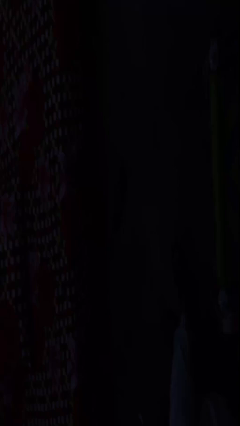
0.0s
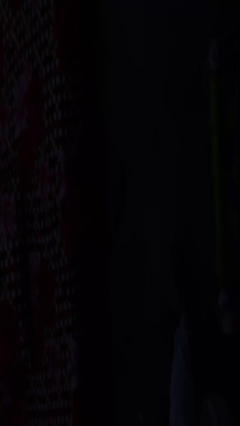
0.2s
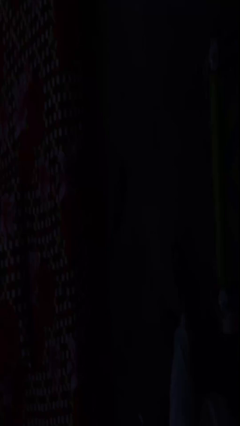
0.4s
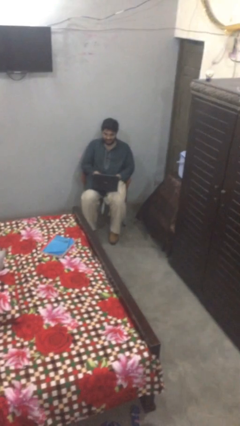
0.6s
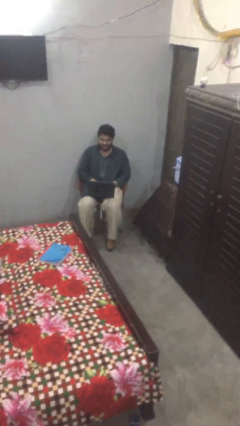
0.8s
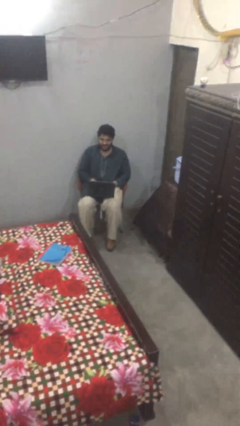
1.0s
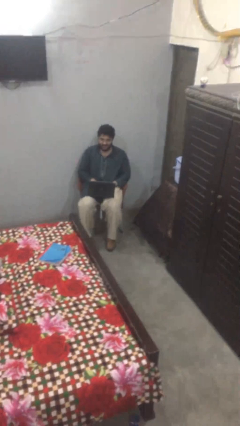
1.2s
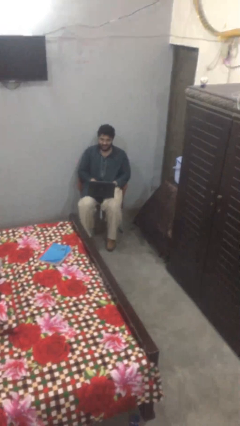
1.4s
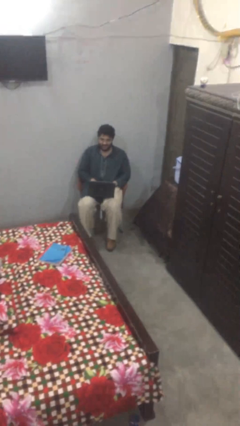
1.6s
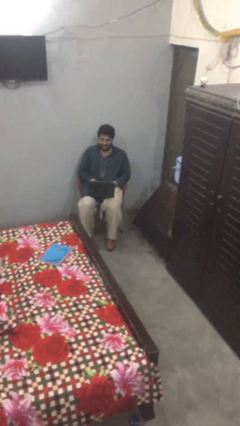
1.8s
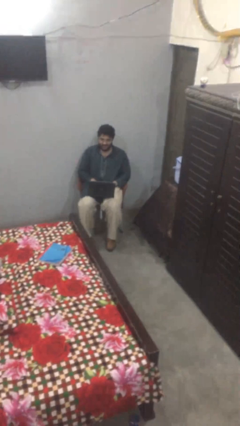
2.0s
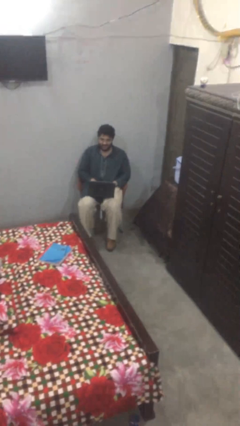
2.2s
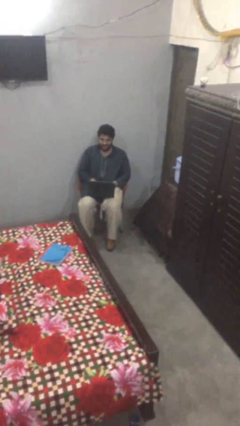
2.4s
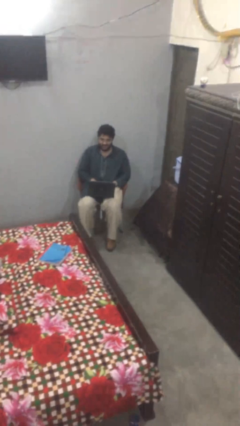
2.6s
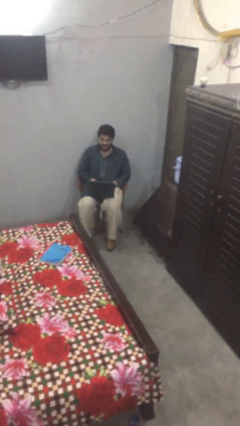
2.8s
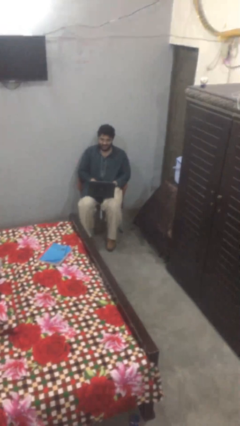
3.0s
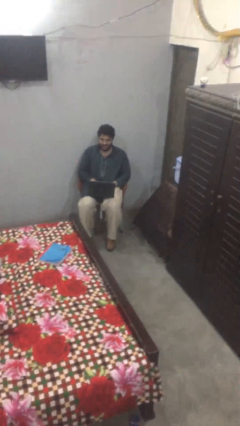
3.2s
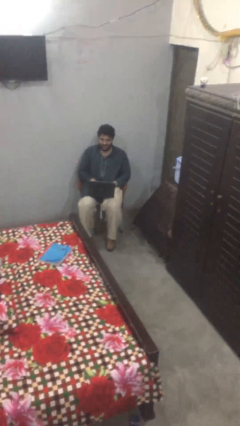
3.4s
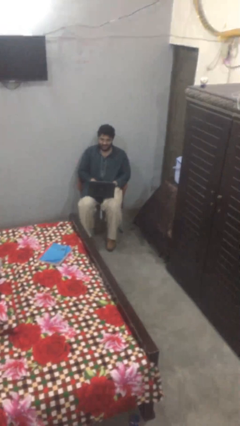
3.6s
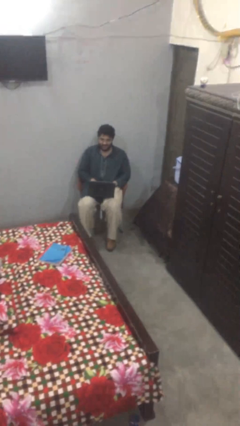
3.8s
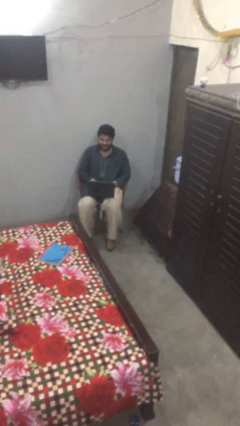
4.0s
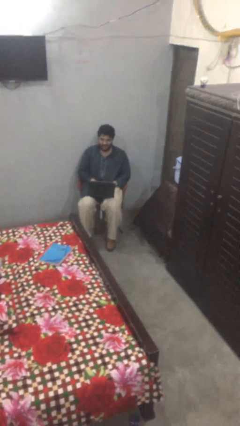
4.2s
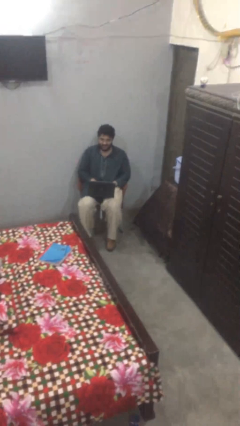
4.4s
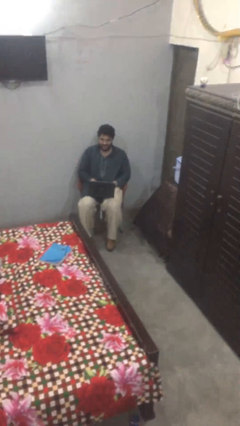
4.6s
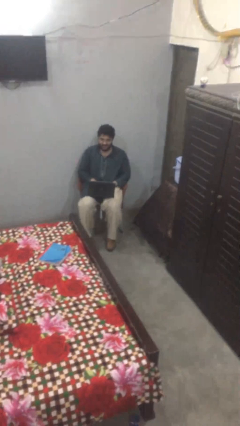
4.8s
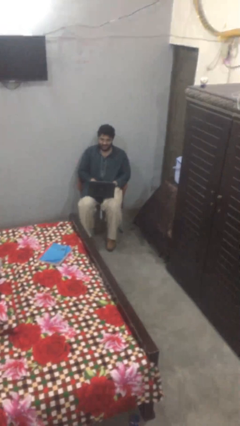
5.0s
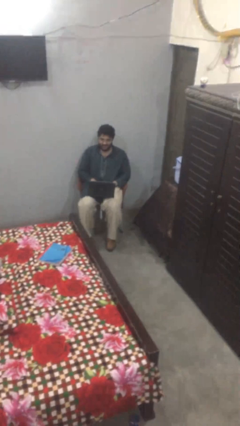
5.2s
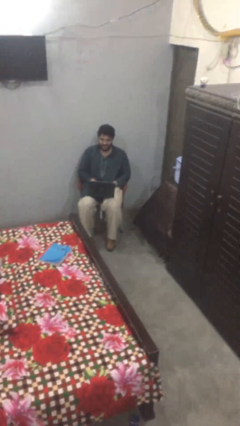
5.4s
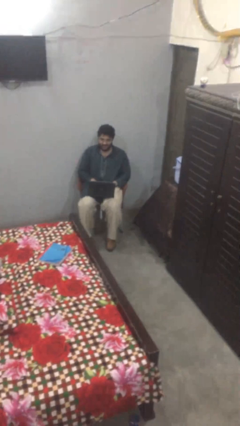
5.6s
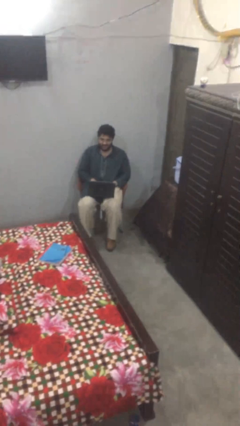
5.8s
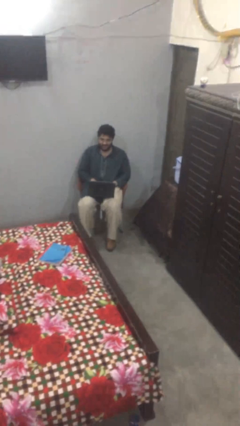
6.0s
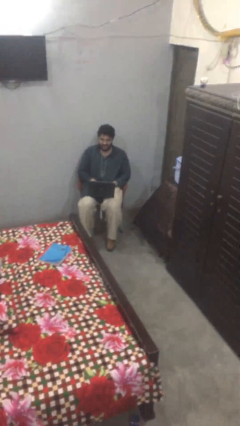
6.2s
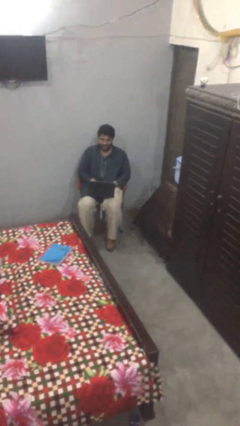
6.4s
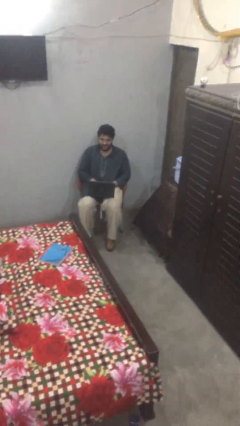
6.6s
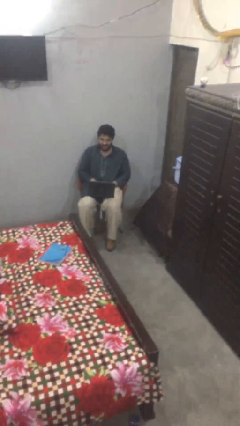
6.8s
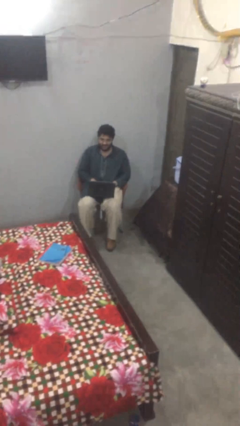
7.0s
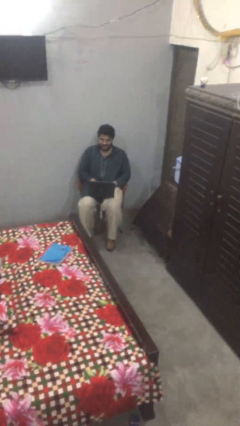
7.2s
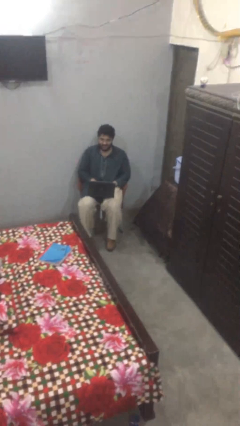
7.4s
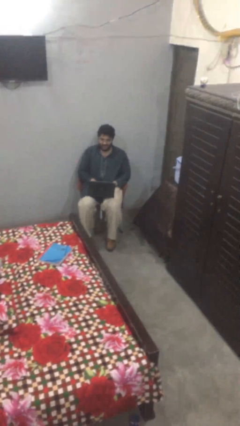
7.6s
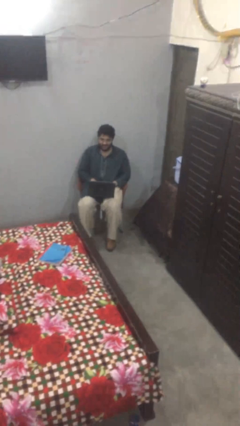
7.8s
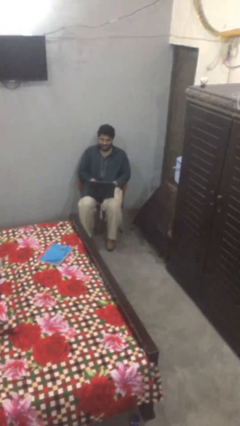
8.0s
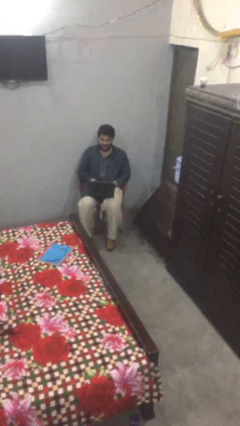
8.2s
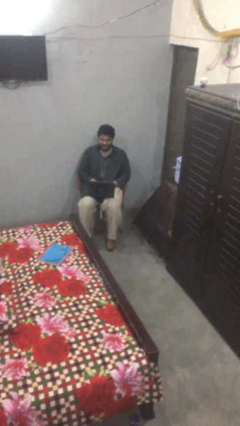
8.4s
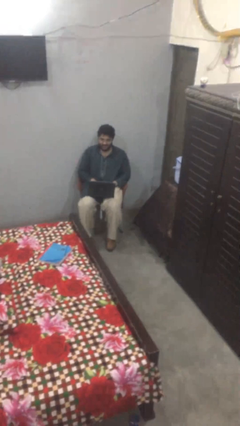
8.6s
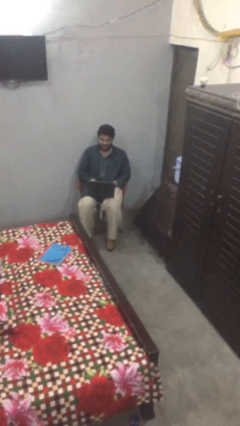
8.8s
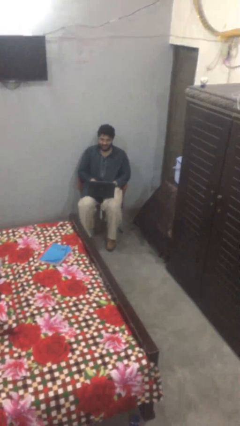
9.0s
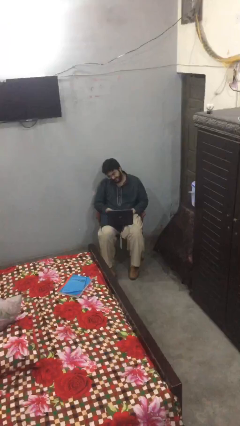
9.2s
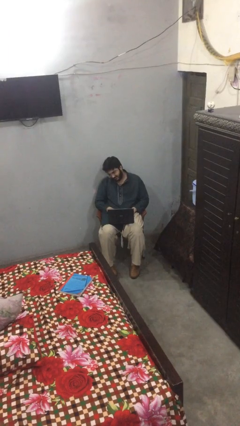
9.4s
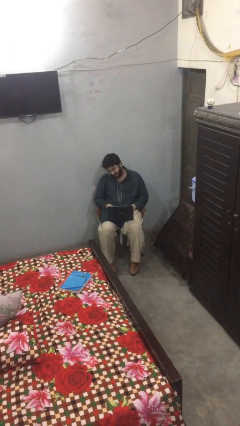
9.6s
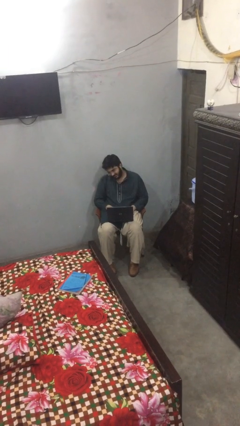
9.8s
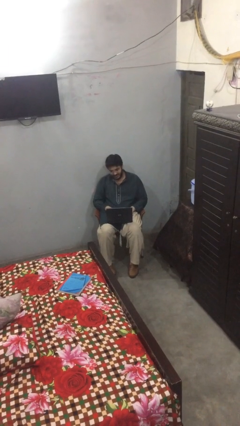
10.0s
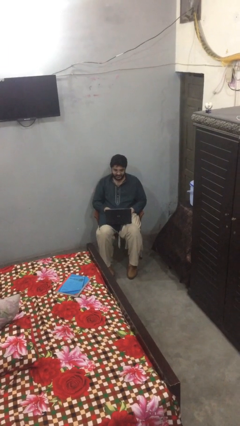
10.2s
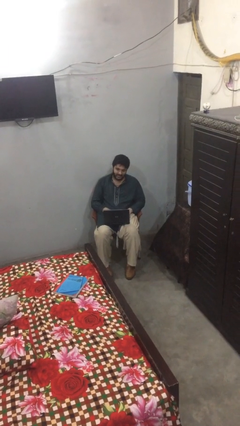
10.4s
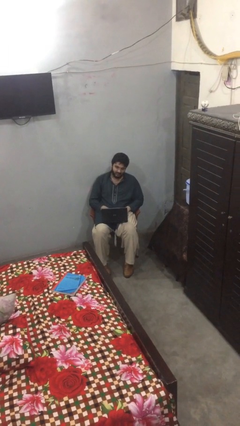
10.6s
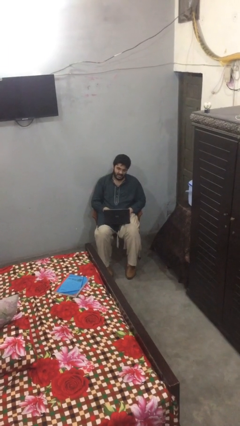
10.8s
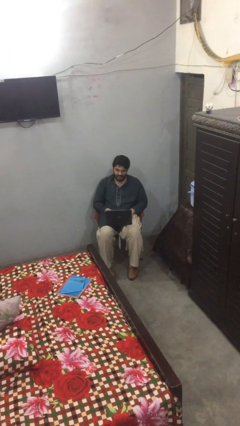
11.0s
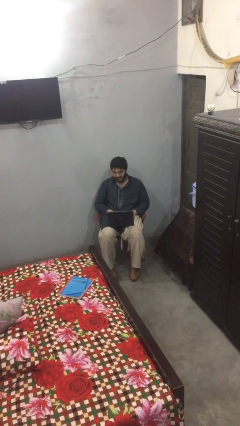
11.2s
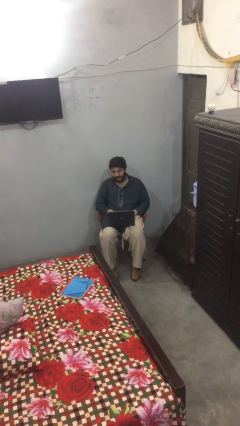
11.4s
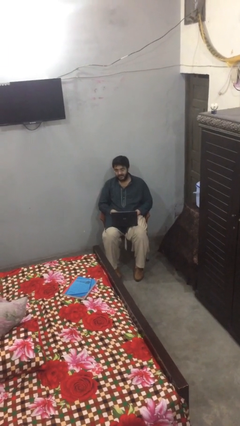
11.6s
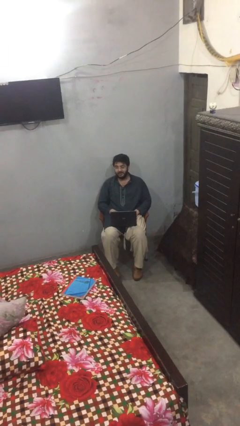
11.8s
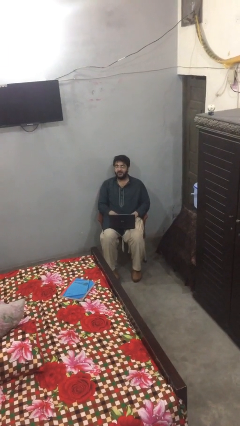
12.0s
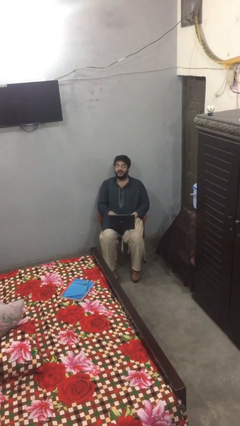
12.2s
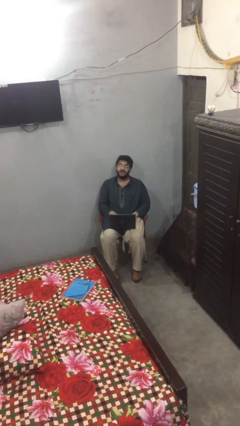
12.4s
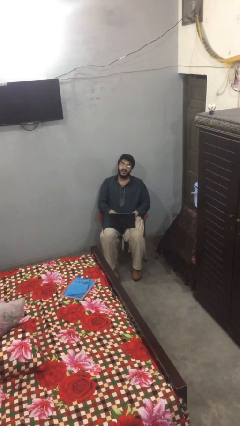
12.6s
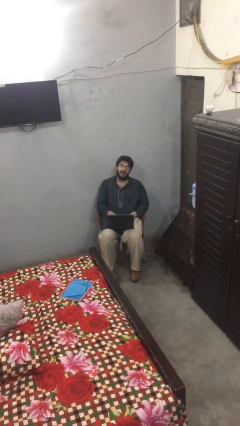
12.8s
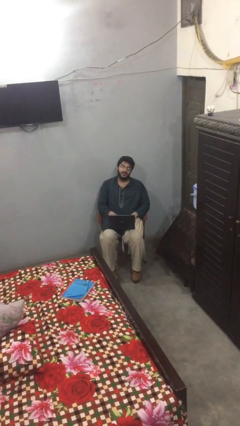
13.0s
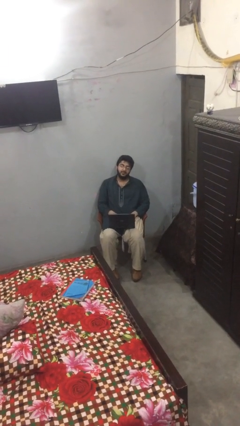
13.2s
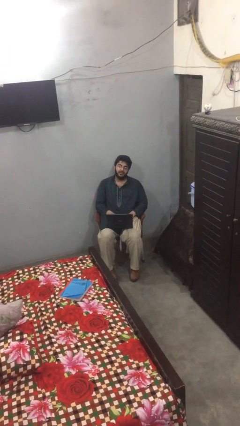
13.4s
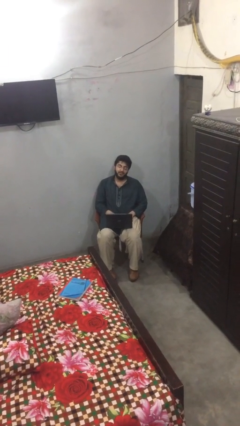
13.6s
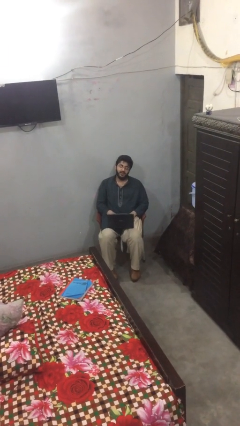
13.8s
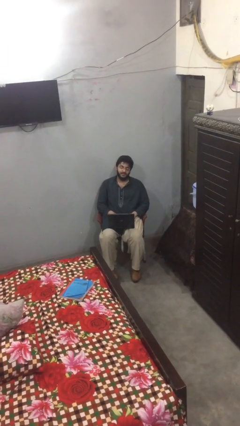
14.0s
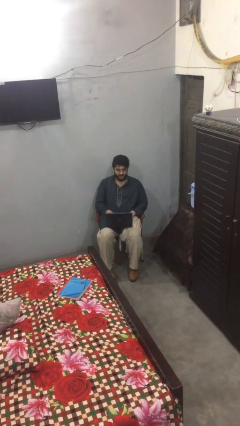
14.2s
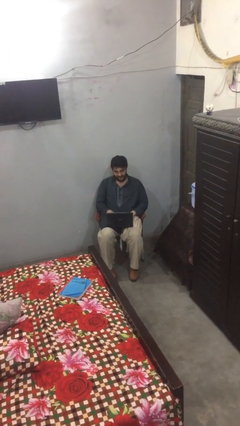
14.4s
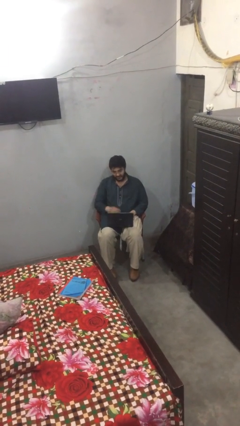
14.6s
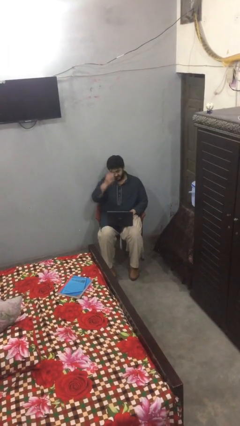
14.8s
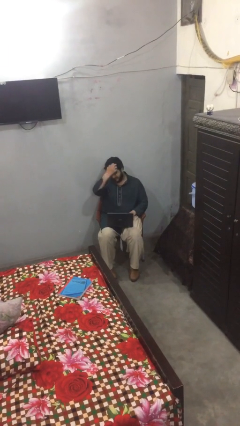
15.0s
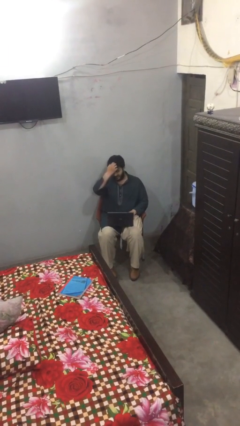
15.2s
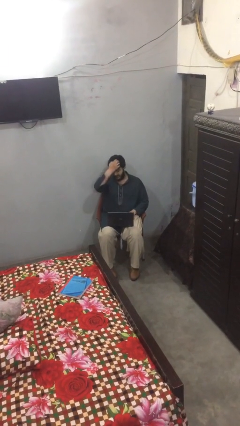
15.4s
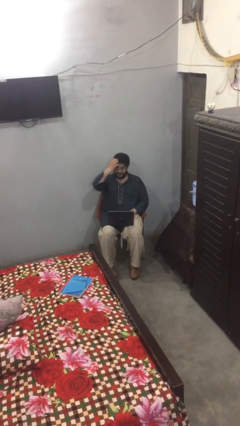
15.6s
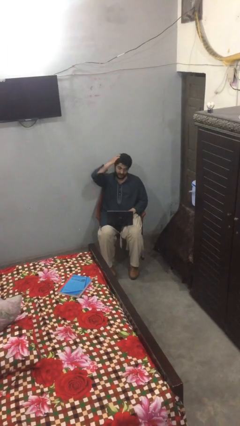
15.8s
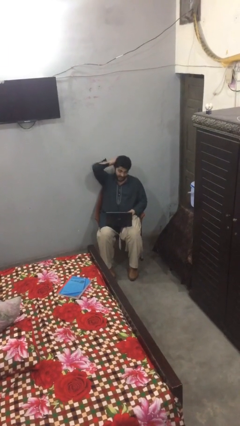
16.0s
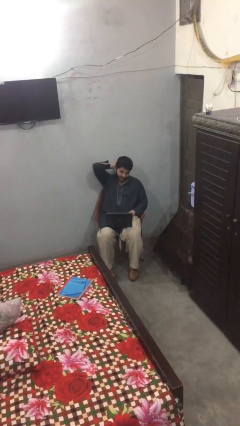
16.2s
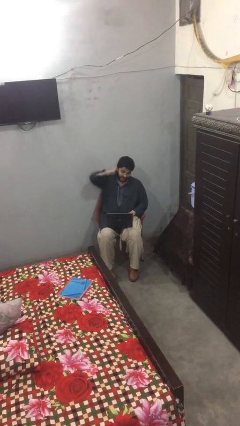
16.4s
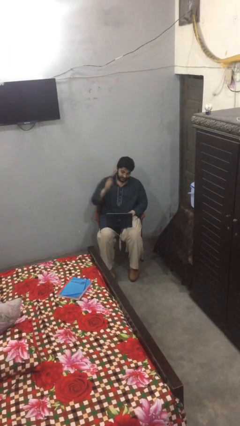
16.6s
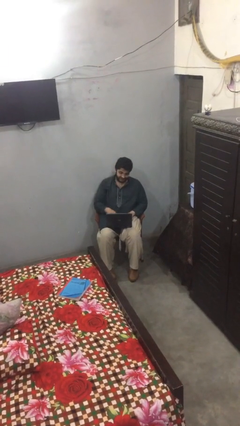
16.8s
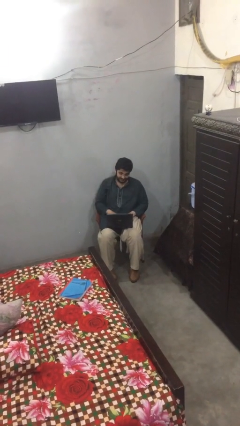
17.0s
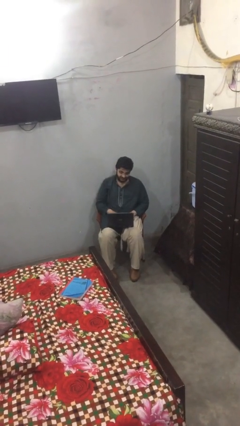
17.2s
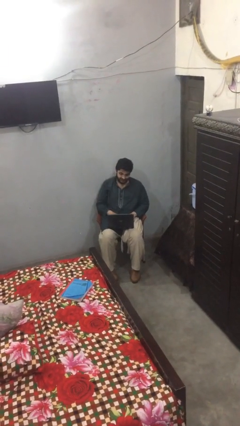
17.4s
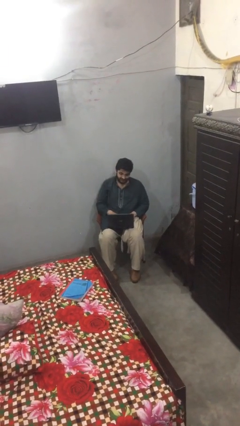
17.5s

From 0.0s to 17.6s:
person interacts with laptop

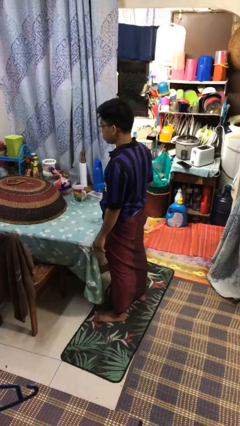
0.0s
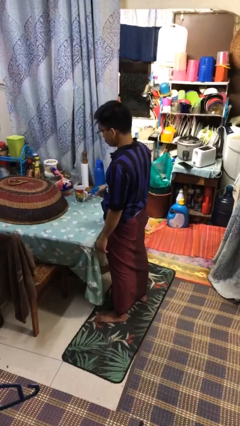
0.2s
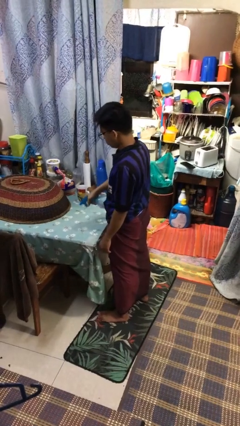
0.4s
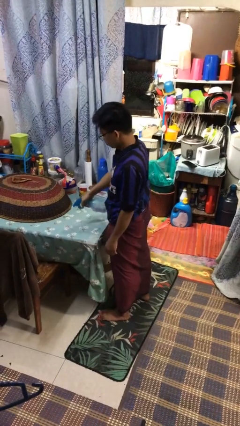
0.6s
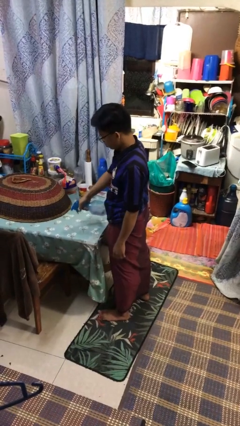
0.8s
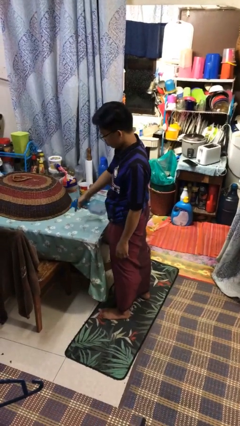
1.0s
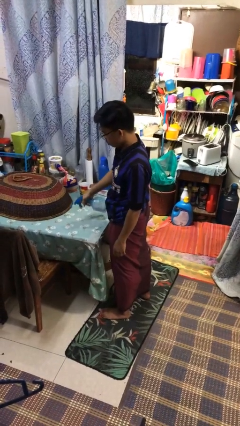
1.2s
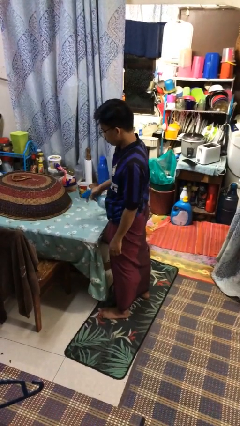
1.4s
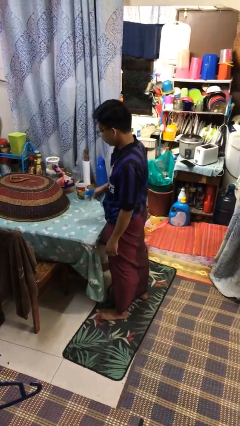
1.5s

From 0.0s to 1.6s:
person sprays from bottle
